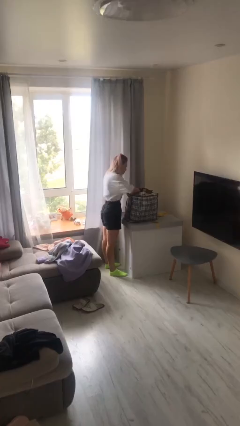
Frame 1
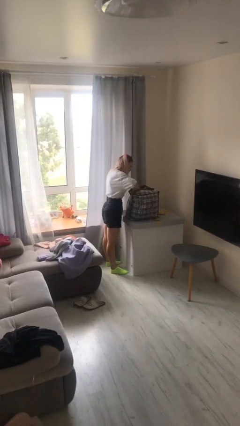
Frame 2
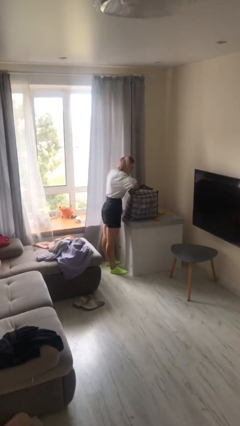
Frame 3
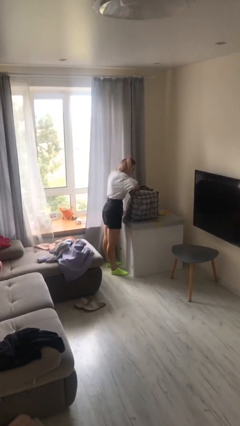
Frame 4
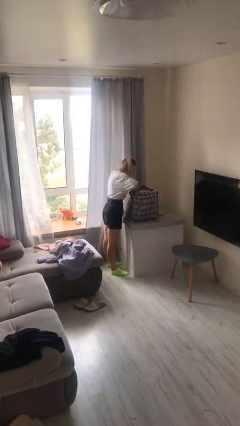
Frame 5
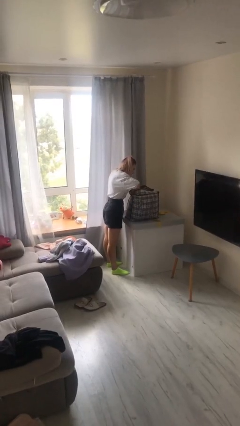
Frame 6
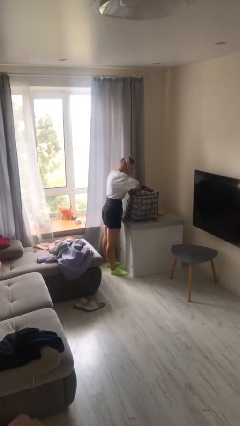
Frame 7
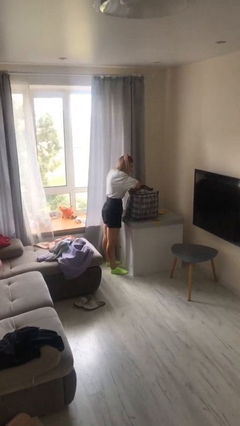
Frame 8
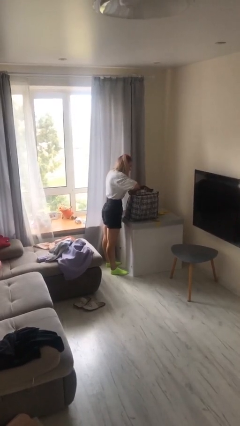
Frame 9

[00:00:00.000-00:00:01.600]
person searches in bag

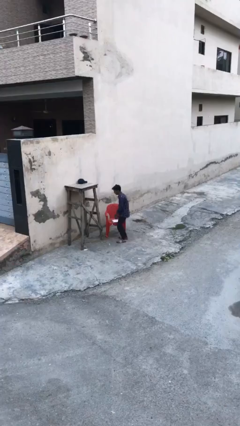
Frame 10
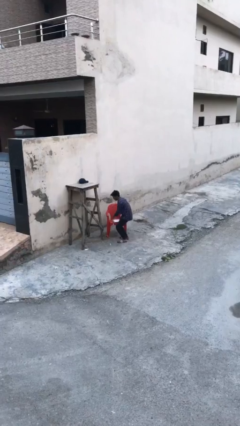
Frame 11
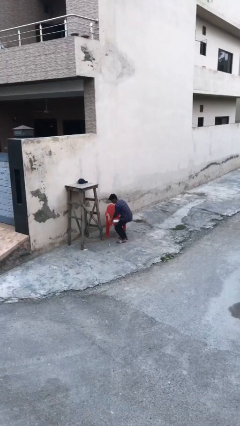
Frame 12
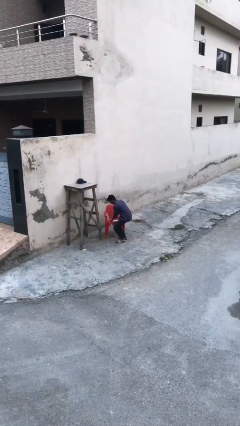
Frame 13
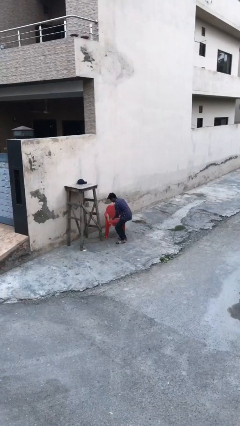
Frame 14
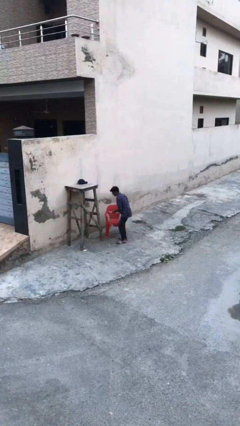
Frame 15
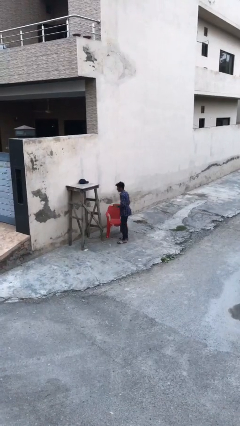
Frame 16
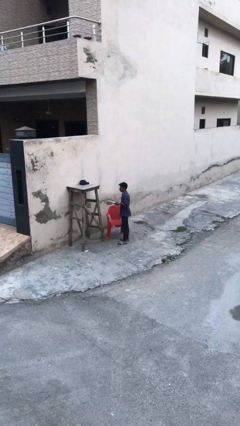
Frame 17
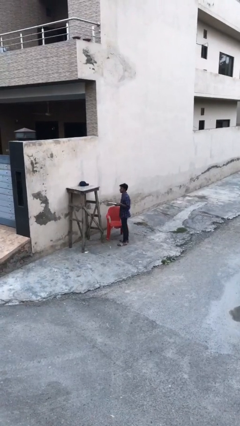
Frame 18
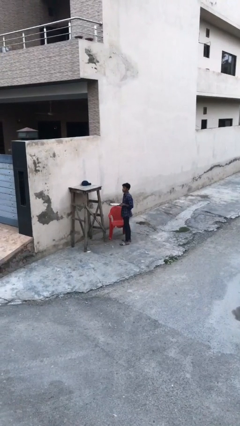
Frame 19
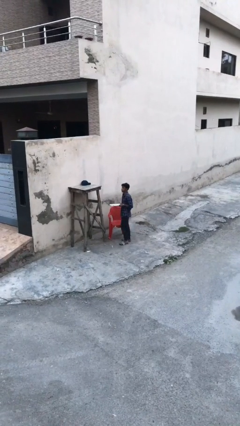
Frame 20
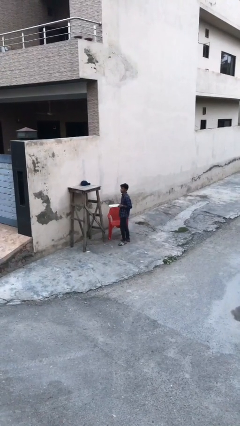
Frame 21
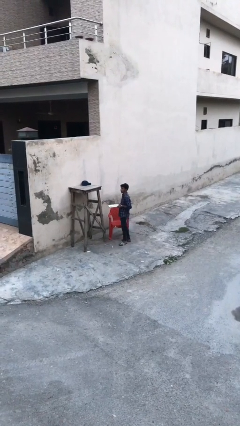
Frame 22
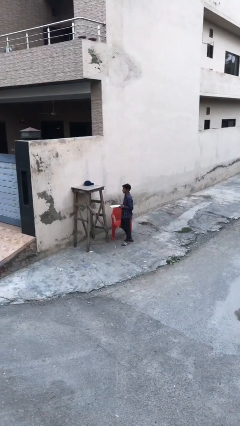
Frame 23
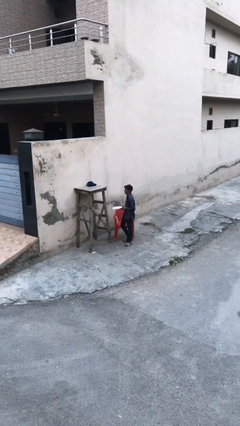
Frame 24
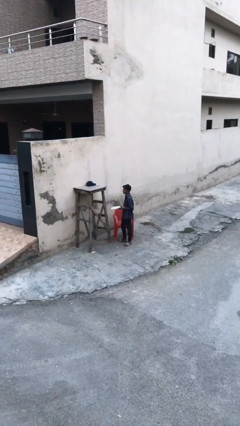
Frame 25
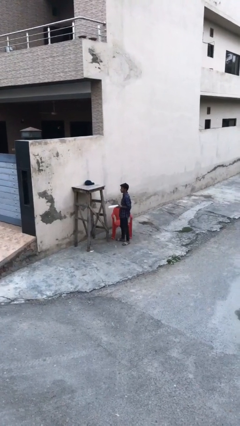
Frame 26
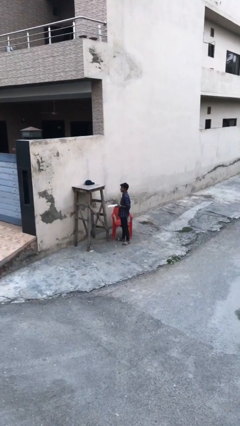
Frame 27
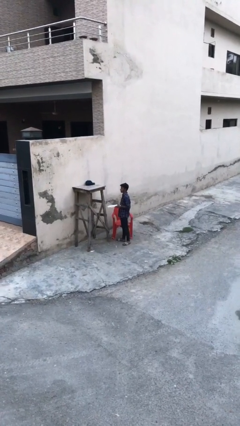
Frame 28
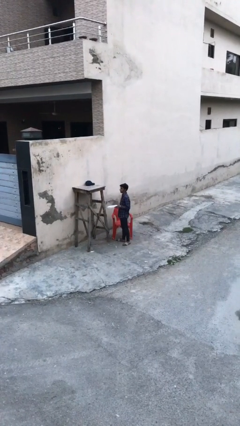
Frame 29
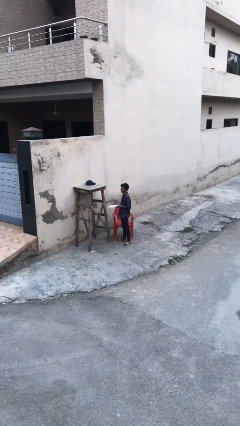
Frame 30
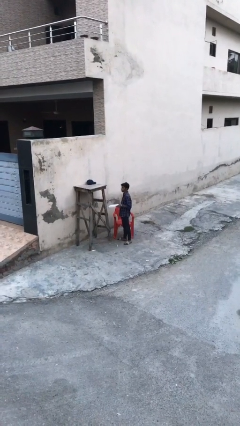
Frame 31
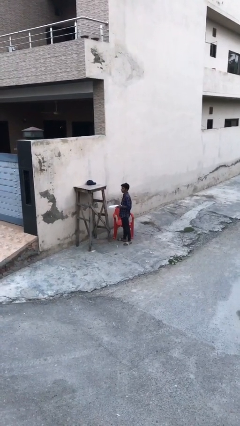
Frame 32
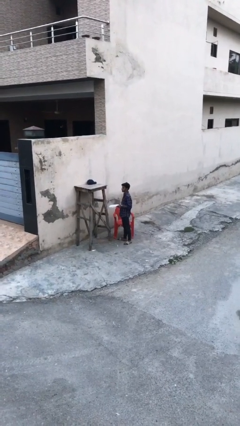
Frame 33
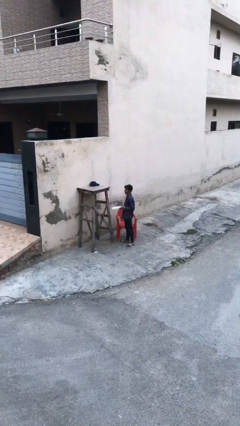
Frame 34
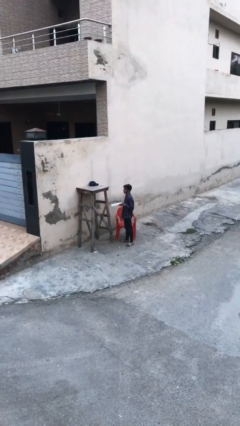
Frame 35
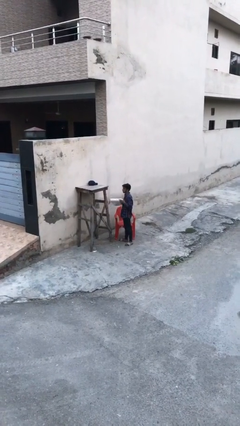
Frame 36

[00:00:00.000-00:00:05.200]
person picks up object from table

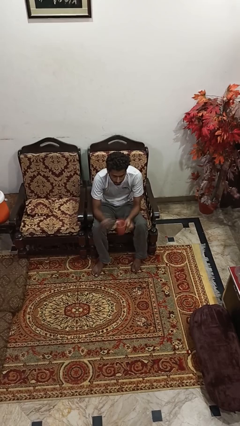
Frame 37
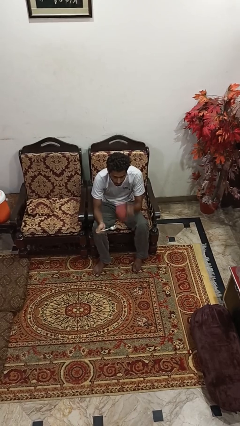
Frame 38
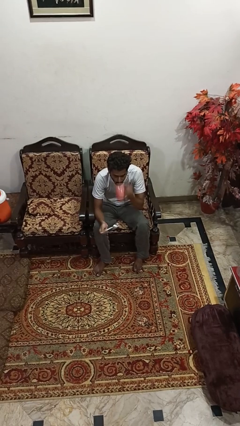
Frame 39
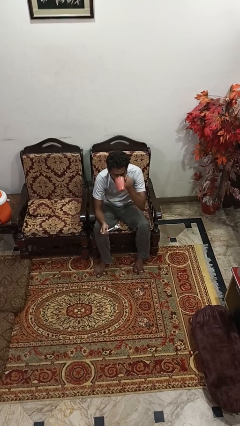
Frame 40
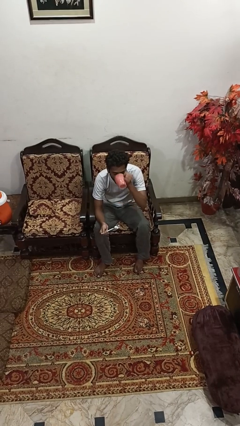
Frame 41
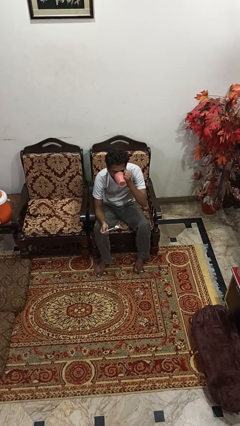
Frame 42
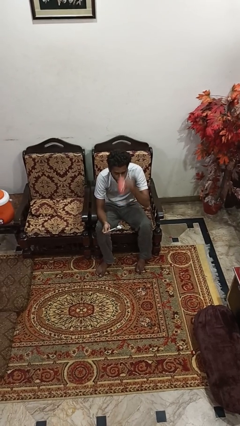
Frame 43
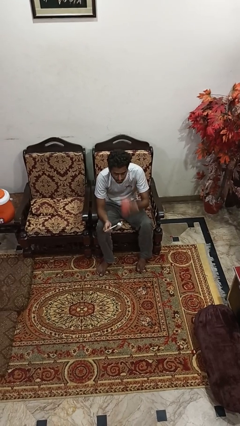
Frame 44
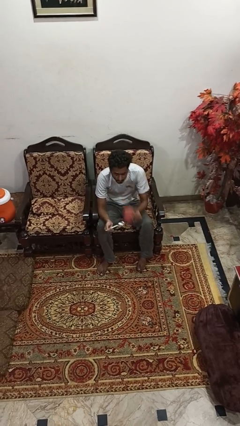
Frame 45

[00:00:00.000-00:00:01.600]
person drinks from mug

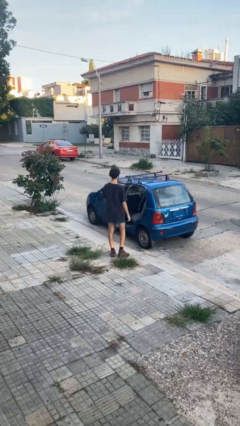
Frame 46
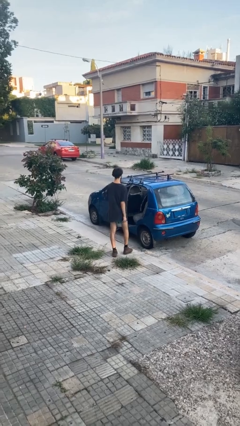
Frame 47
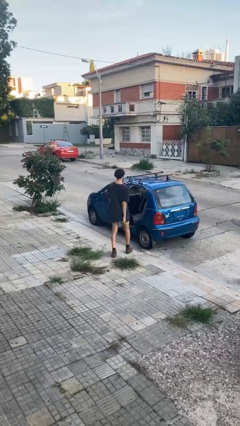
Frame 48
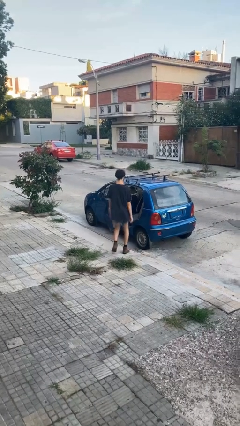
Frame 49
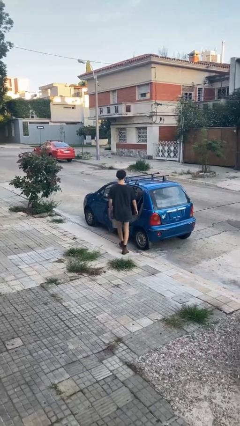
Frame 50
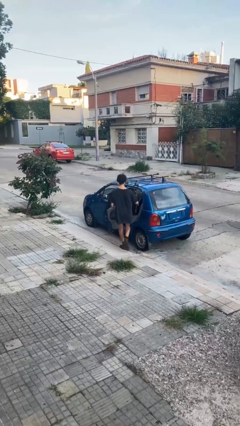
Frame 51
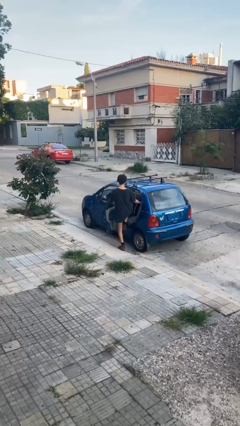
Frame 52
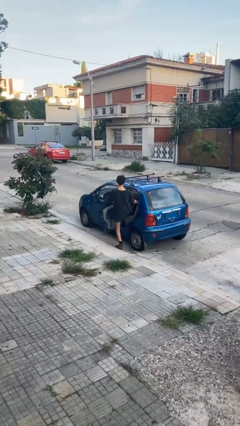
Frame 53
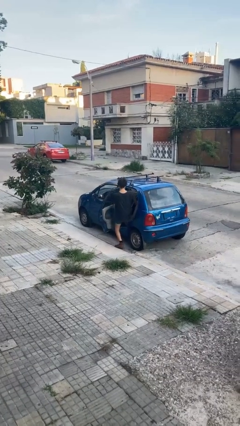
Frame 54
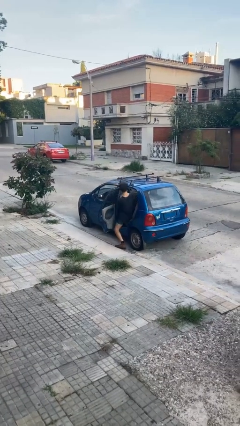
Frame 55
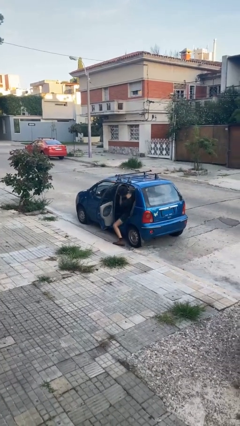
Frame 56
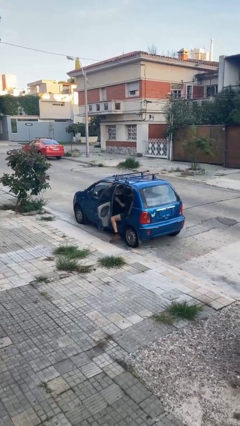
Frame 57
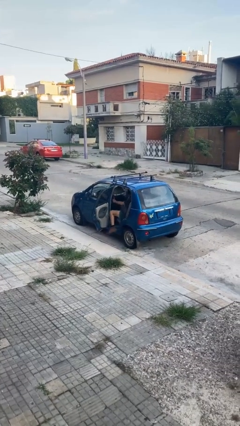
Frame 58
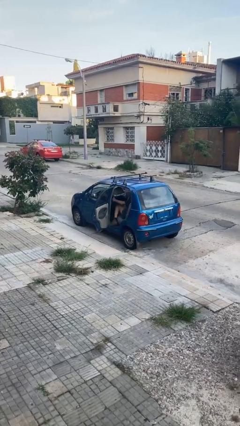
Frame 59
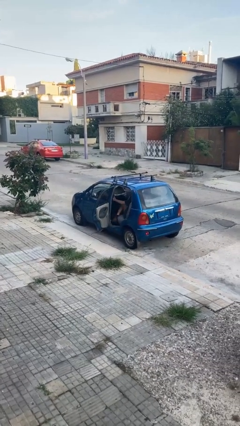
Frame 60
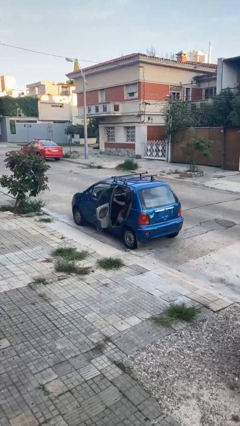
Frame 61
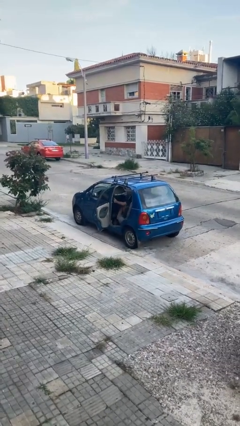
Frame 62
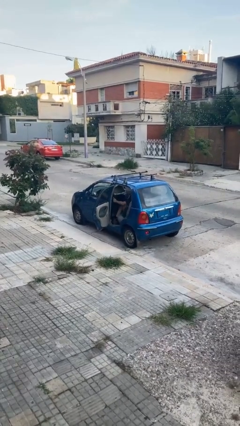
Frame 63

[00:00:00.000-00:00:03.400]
person enters car

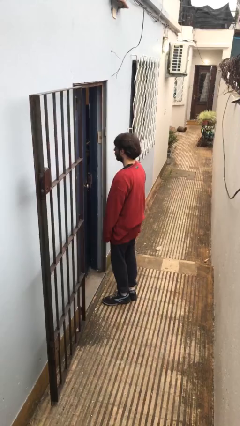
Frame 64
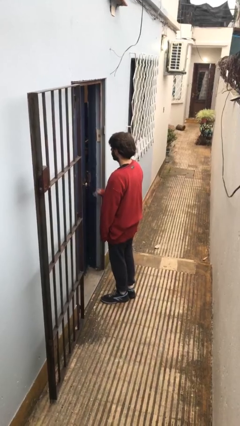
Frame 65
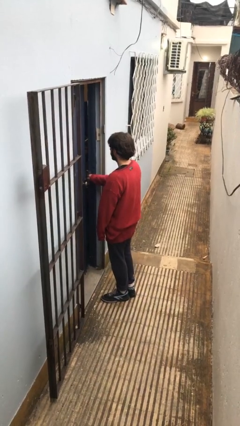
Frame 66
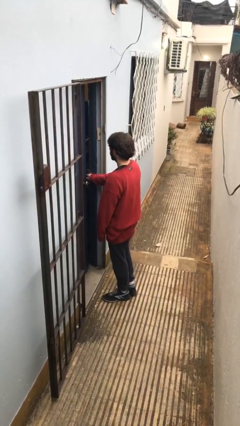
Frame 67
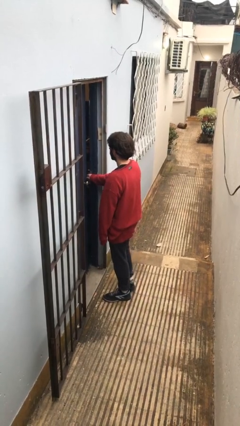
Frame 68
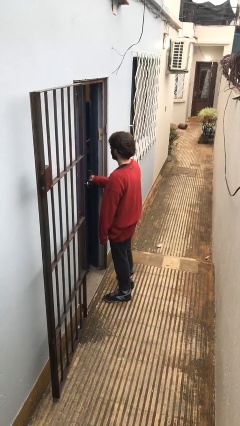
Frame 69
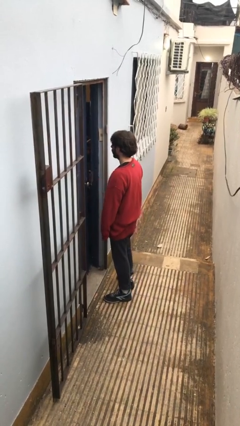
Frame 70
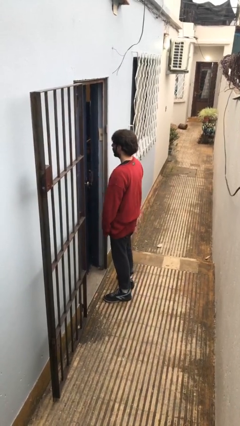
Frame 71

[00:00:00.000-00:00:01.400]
person unlocks door with keys

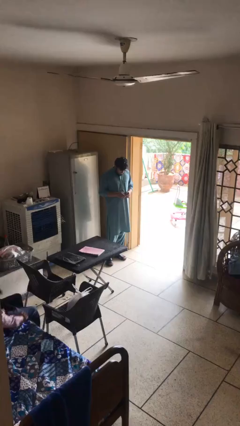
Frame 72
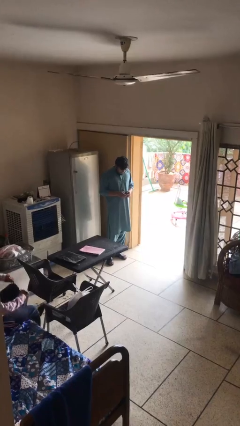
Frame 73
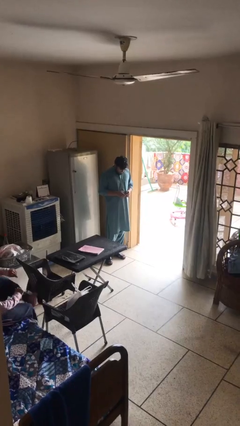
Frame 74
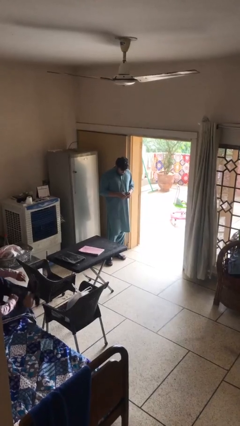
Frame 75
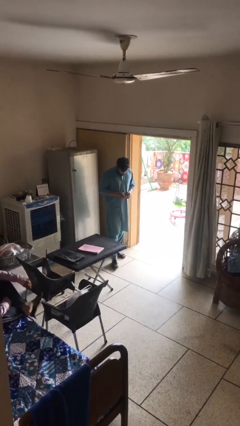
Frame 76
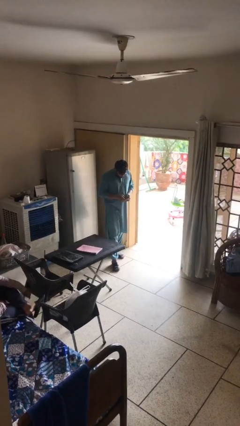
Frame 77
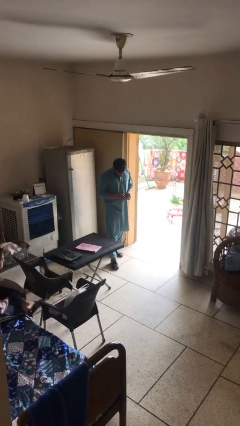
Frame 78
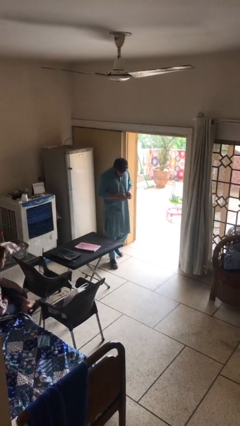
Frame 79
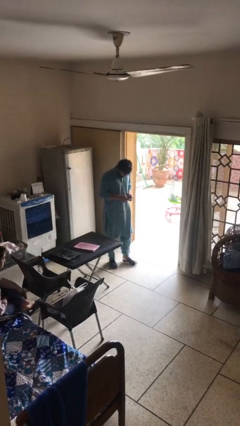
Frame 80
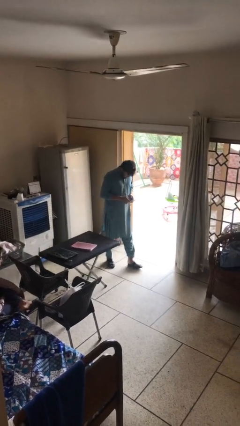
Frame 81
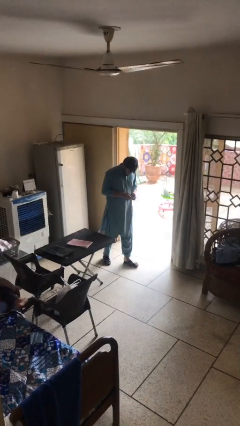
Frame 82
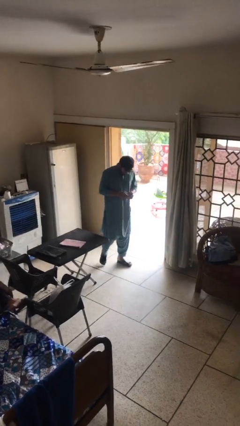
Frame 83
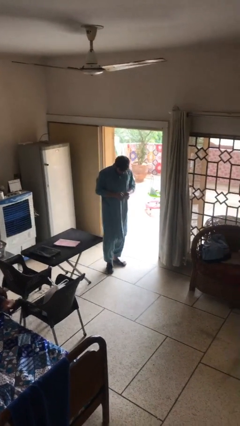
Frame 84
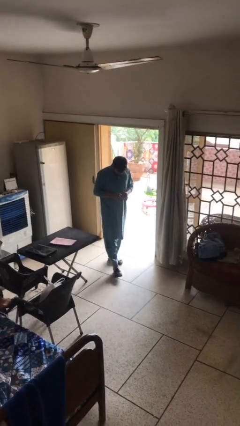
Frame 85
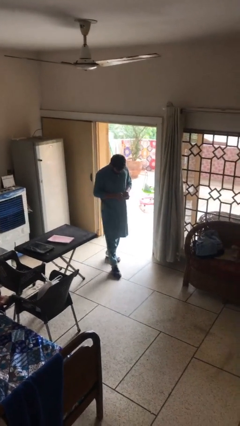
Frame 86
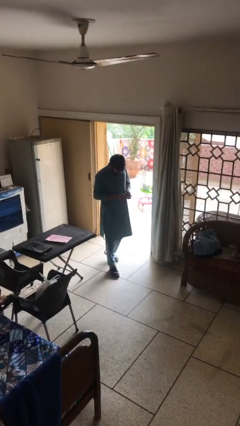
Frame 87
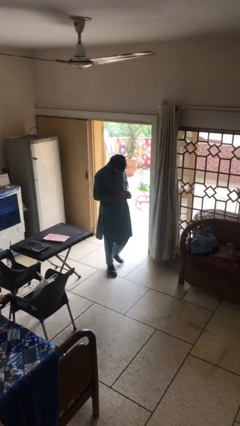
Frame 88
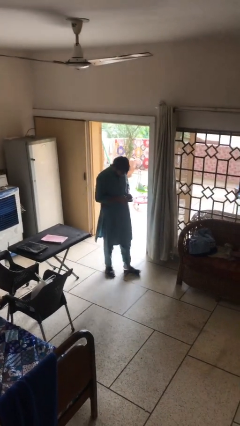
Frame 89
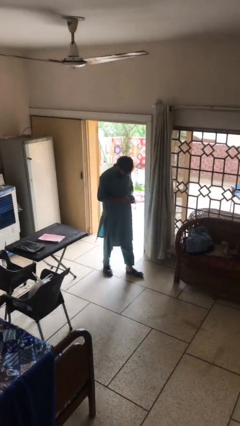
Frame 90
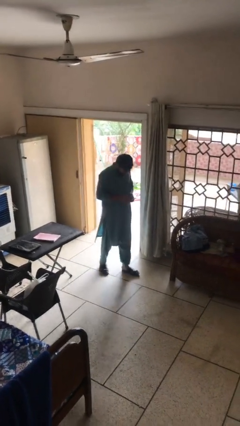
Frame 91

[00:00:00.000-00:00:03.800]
person texts on phone

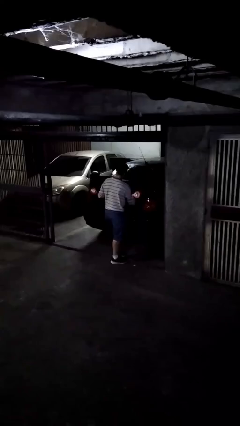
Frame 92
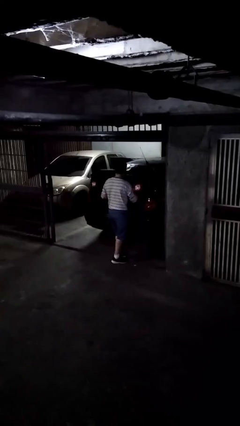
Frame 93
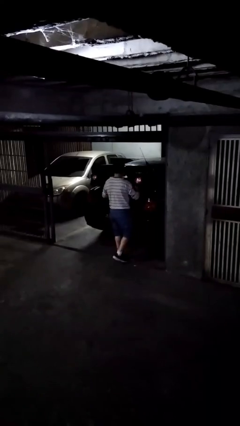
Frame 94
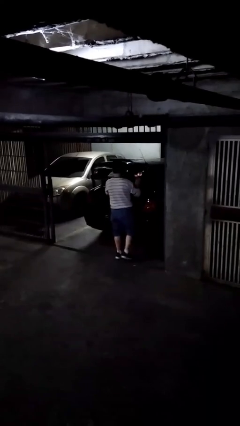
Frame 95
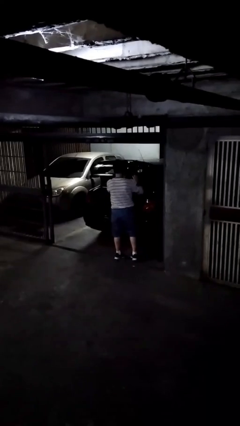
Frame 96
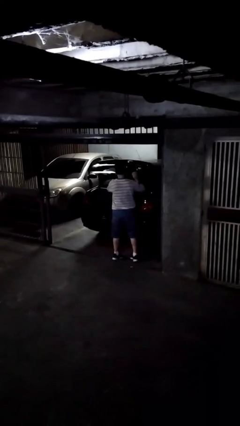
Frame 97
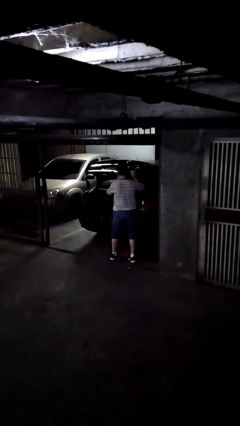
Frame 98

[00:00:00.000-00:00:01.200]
person opens car trunk
